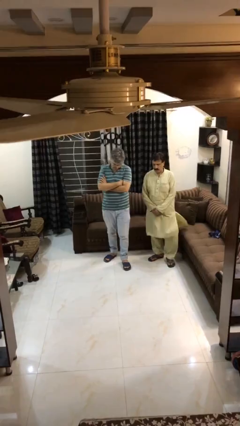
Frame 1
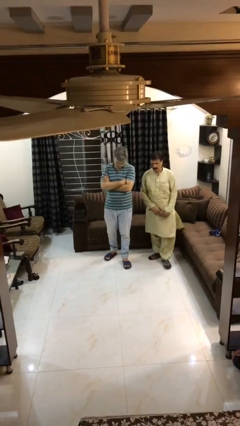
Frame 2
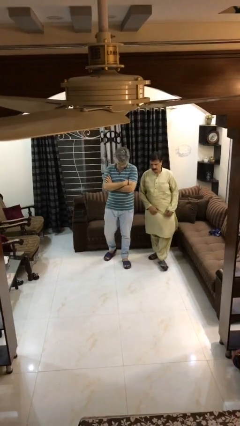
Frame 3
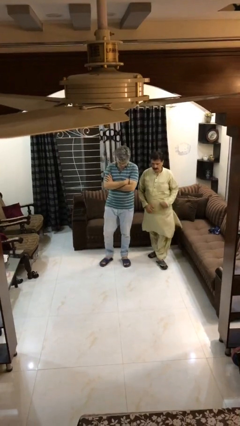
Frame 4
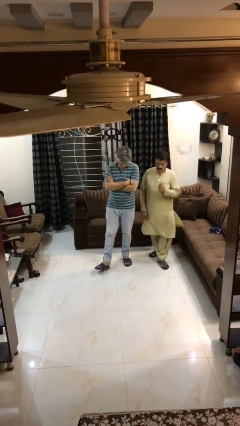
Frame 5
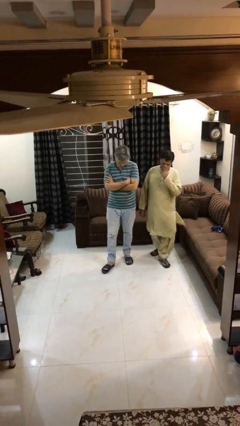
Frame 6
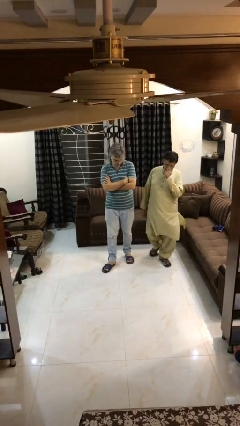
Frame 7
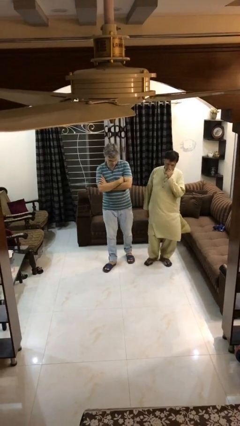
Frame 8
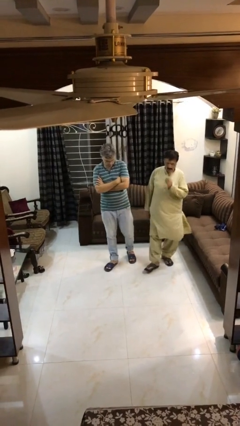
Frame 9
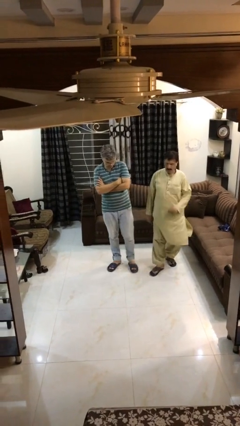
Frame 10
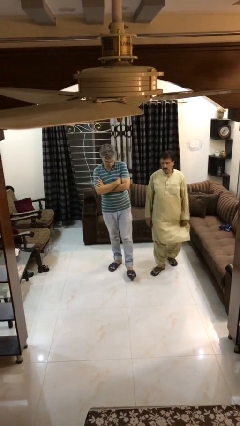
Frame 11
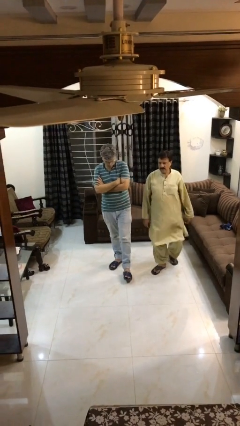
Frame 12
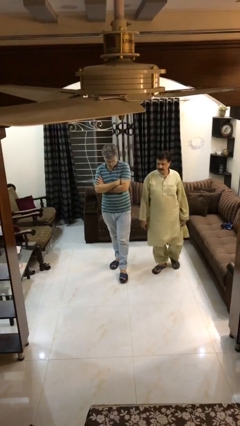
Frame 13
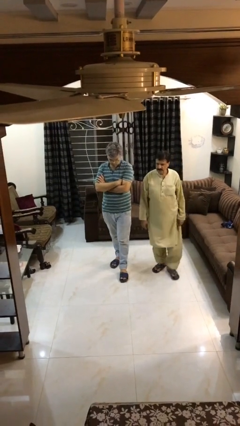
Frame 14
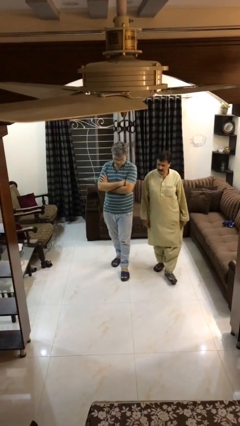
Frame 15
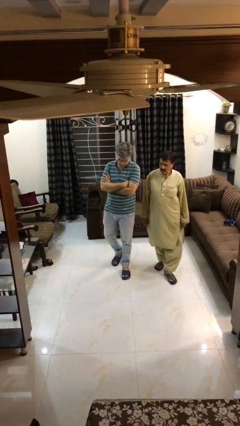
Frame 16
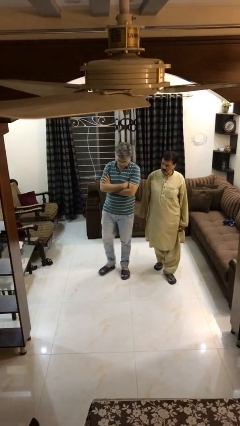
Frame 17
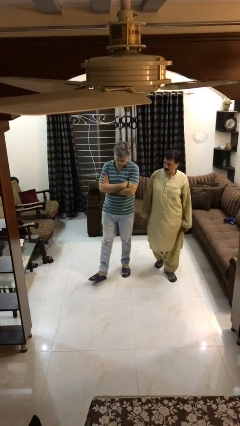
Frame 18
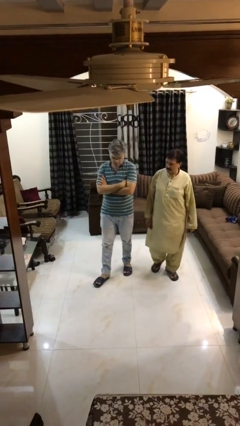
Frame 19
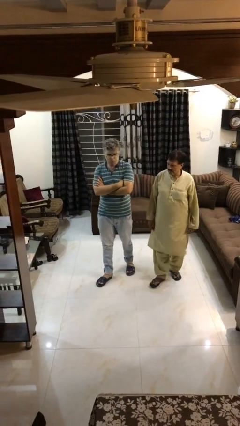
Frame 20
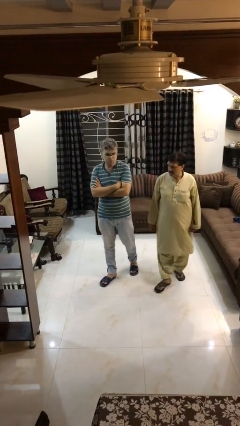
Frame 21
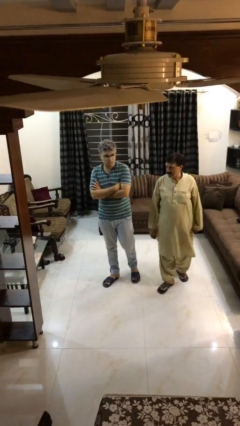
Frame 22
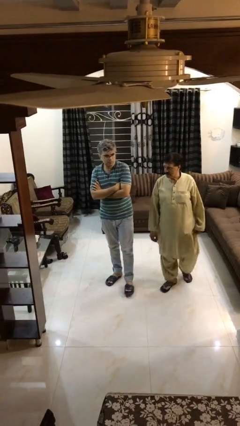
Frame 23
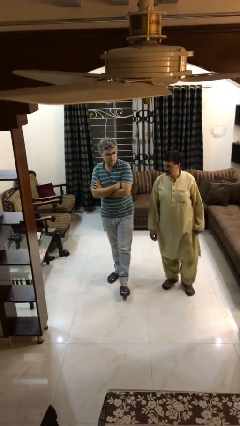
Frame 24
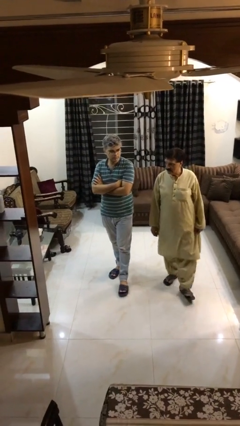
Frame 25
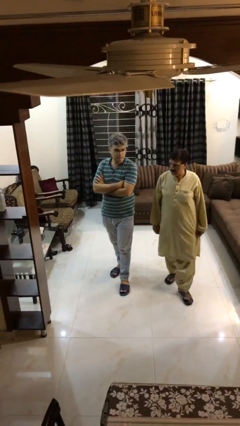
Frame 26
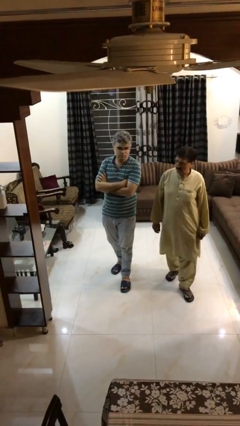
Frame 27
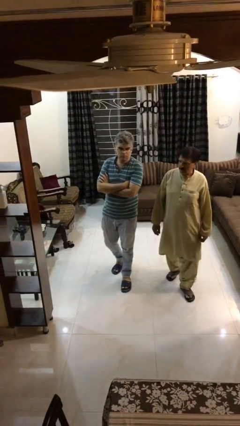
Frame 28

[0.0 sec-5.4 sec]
person talks to person

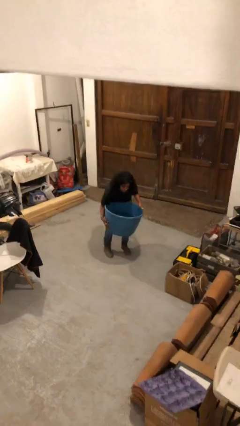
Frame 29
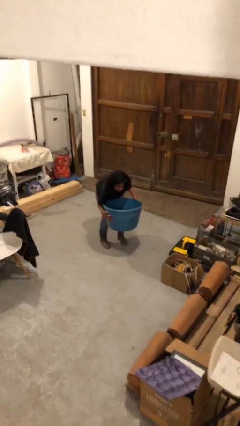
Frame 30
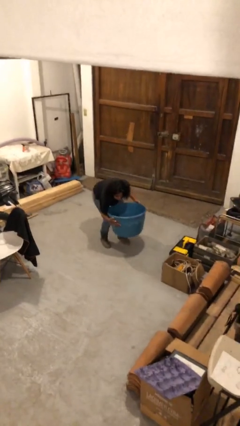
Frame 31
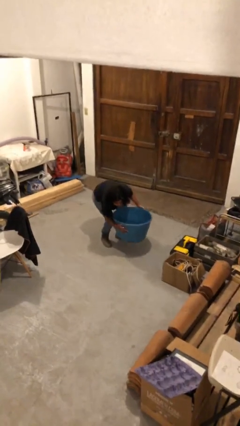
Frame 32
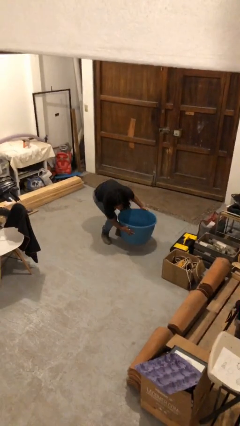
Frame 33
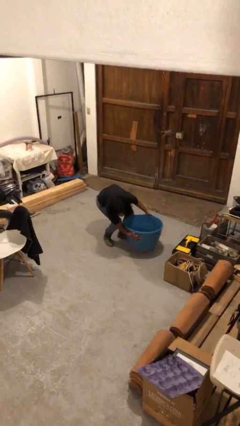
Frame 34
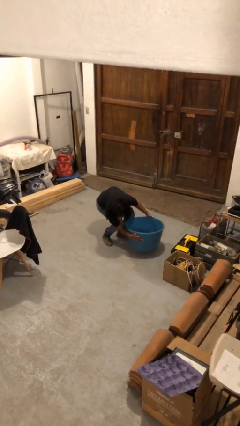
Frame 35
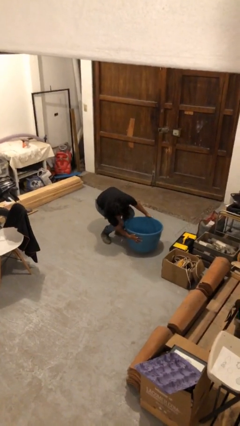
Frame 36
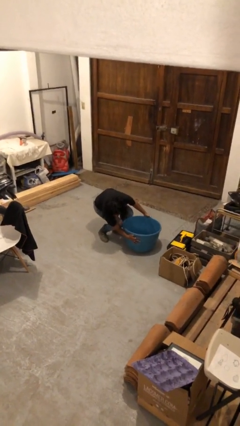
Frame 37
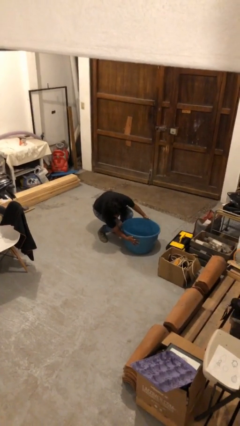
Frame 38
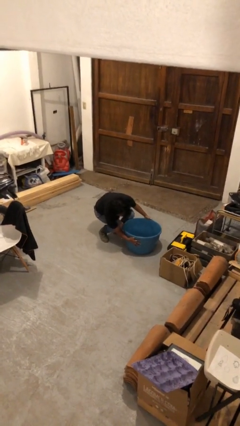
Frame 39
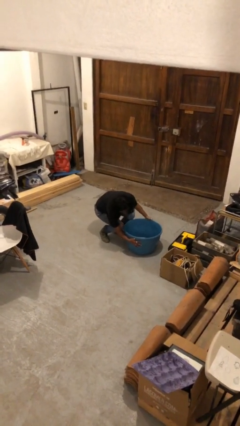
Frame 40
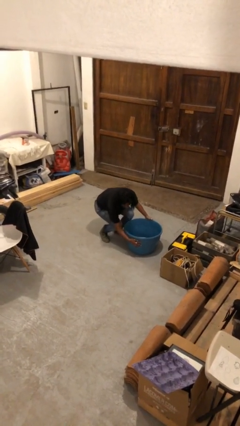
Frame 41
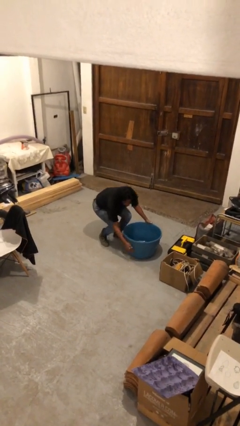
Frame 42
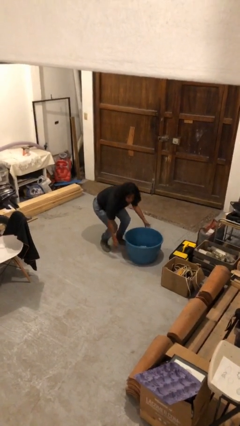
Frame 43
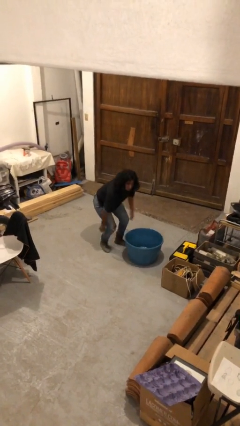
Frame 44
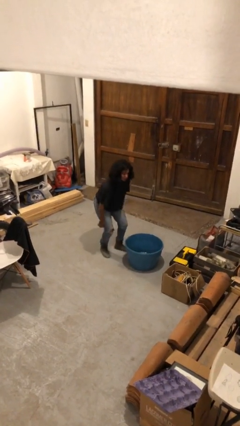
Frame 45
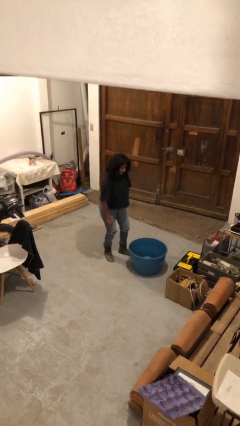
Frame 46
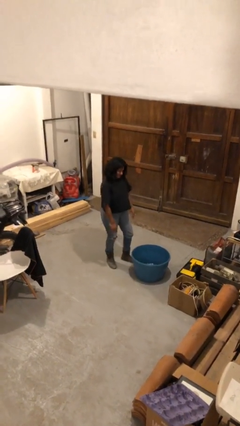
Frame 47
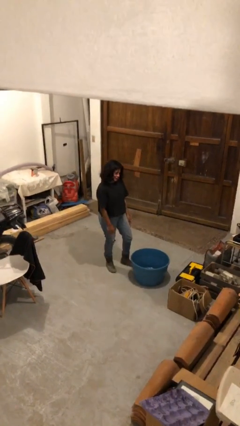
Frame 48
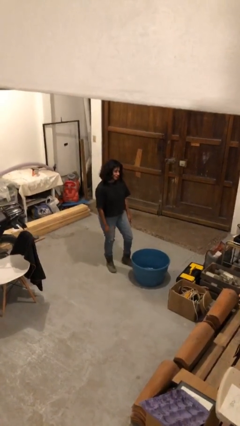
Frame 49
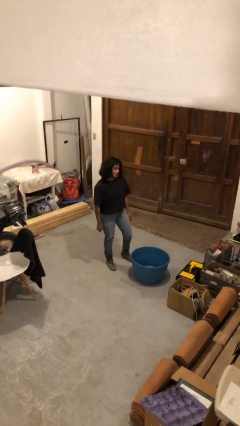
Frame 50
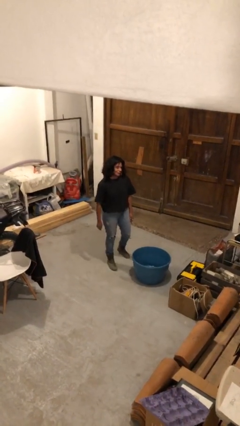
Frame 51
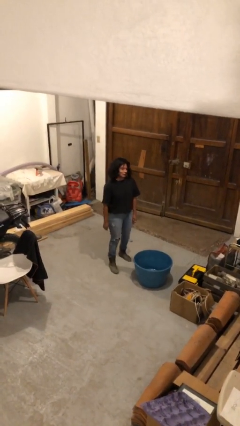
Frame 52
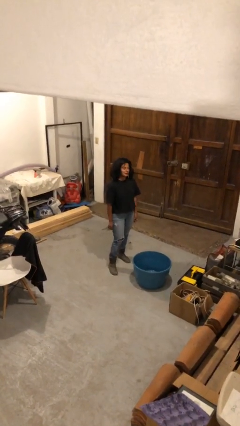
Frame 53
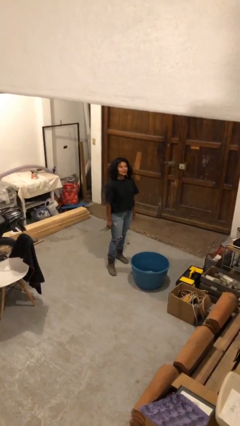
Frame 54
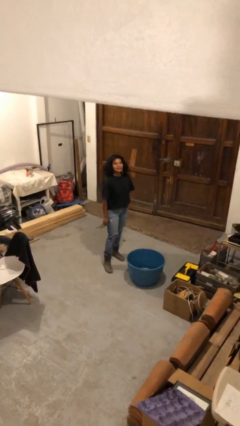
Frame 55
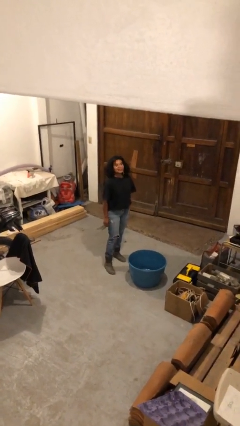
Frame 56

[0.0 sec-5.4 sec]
person puts down object on floor

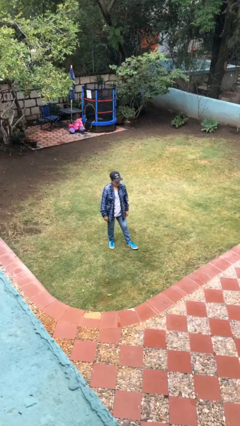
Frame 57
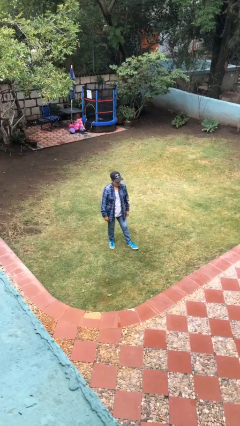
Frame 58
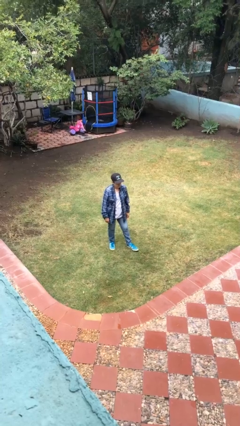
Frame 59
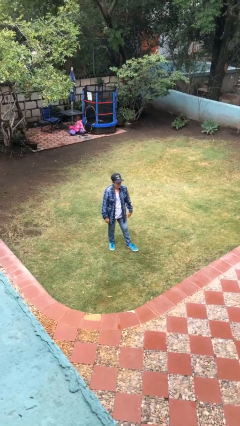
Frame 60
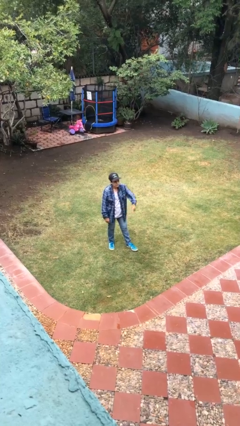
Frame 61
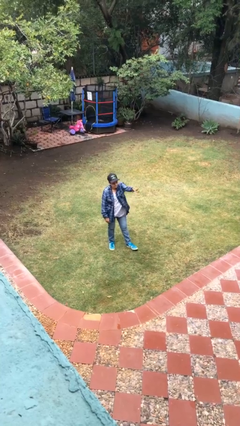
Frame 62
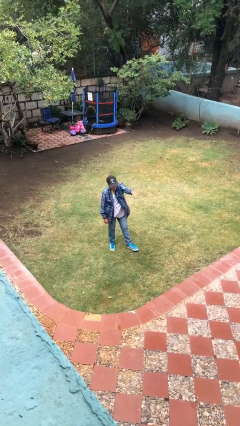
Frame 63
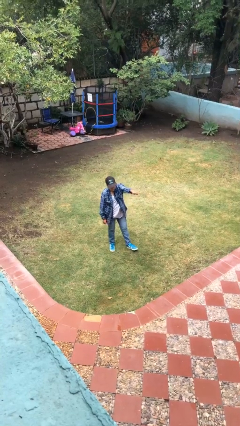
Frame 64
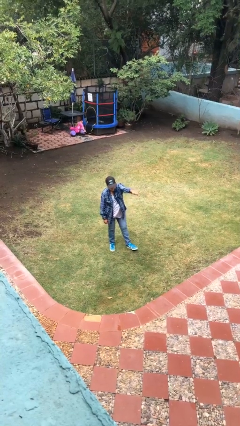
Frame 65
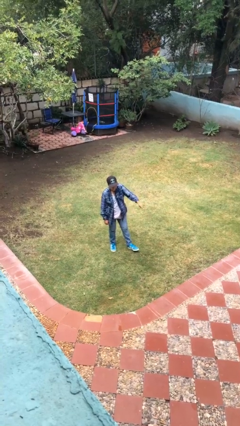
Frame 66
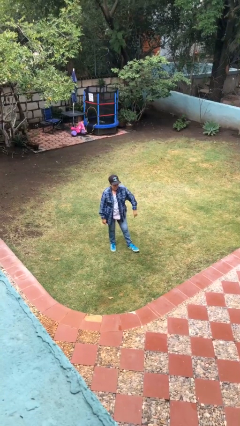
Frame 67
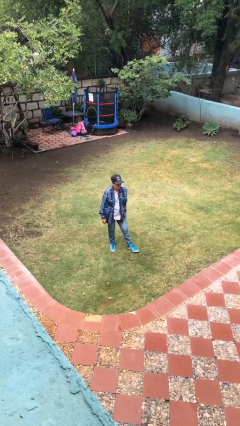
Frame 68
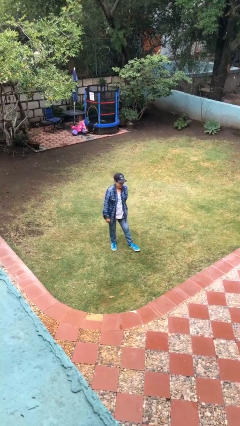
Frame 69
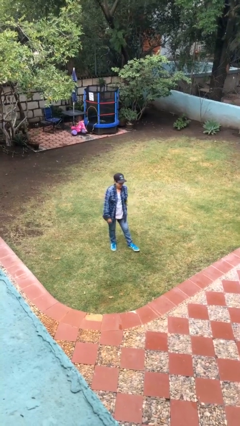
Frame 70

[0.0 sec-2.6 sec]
person points at person

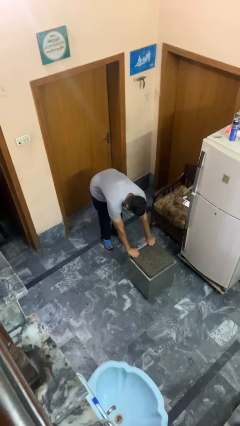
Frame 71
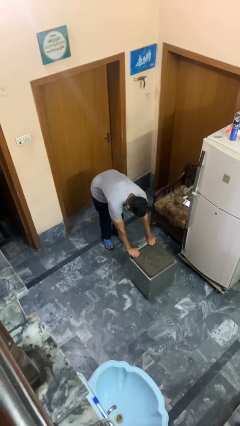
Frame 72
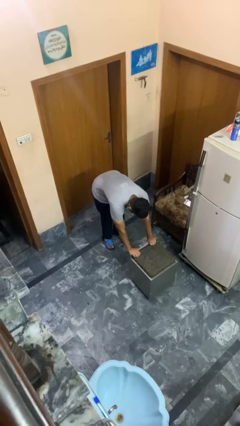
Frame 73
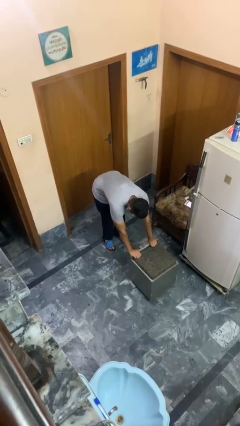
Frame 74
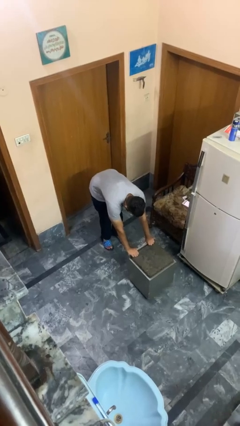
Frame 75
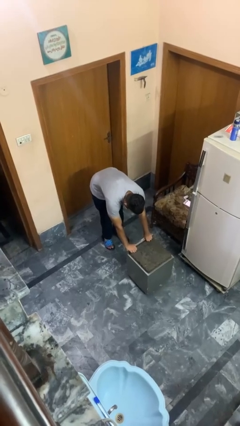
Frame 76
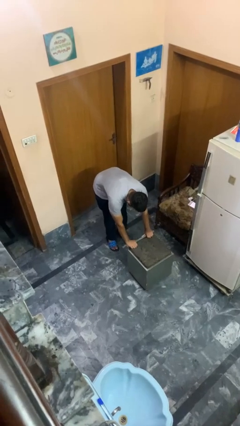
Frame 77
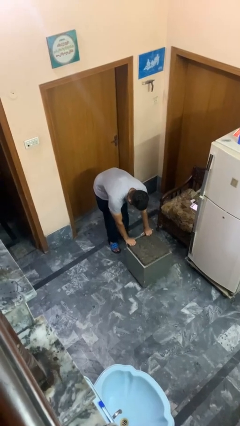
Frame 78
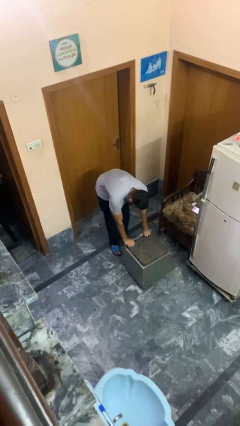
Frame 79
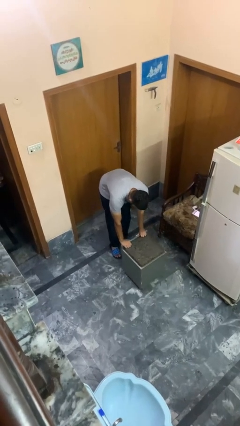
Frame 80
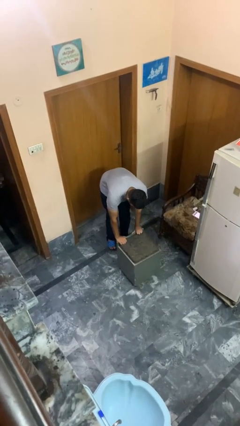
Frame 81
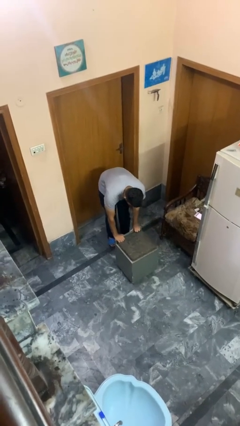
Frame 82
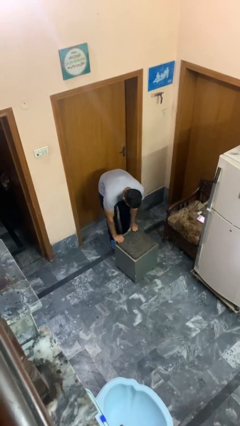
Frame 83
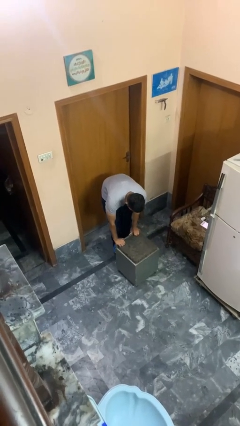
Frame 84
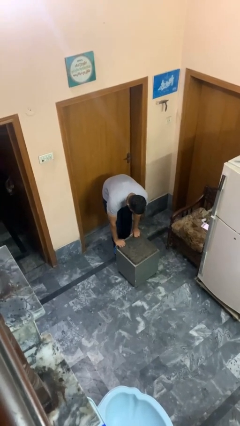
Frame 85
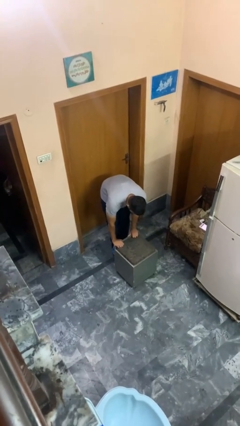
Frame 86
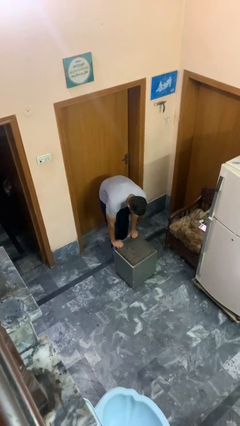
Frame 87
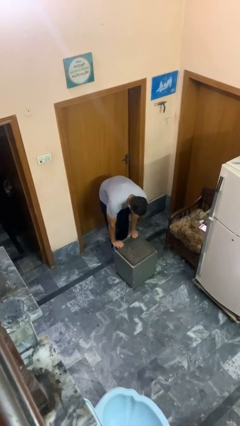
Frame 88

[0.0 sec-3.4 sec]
person pulls wheeled cart

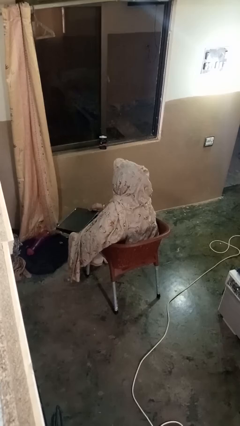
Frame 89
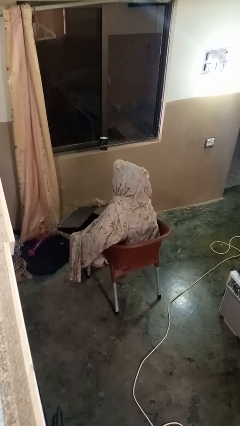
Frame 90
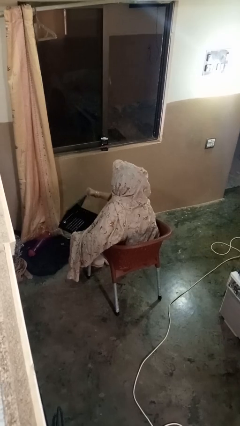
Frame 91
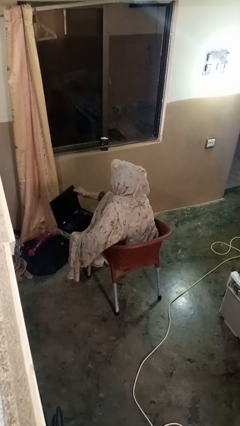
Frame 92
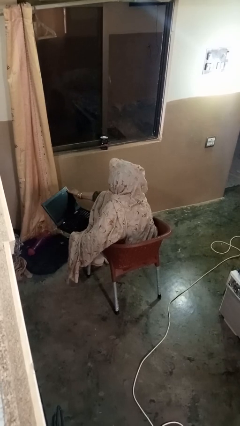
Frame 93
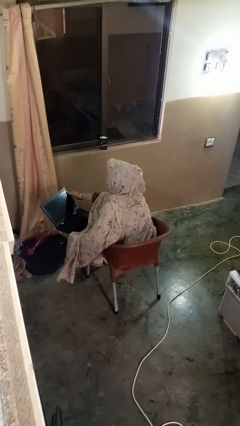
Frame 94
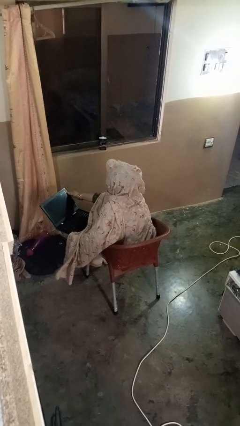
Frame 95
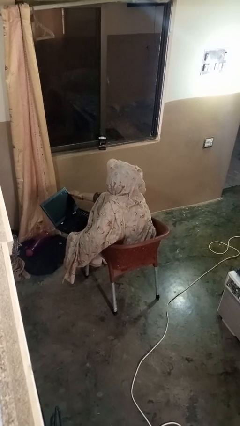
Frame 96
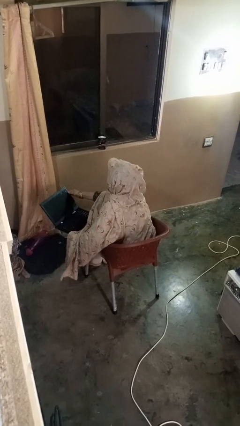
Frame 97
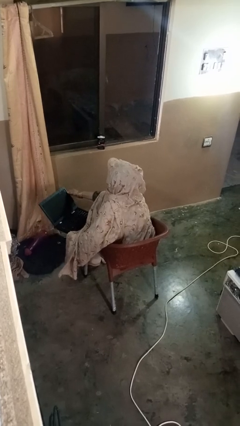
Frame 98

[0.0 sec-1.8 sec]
person opens laptop
